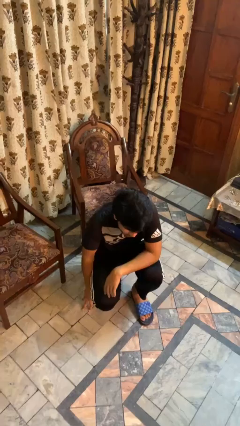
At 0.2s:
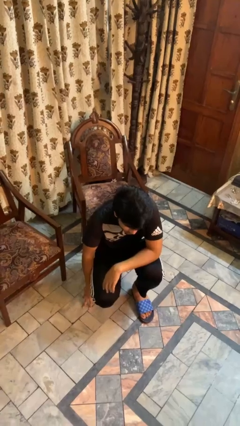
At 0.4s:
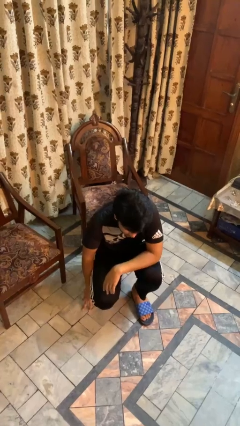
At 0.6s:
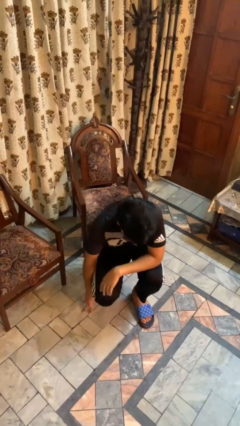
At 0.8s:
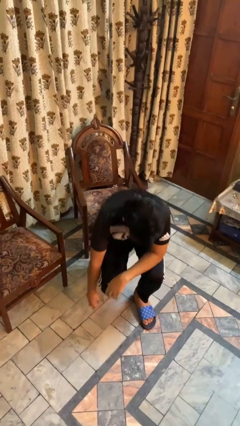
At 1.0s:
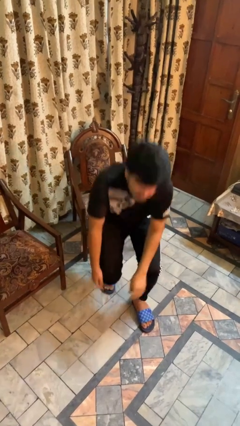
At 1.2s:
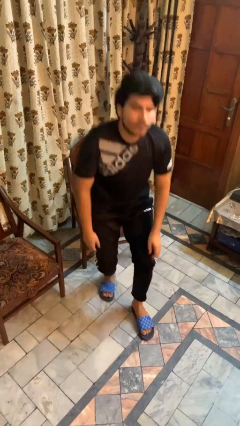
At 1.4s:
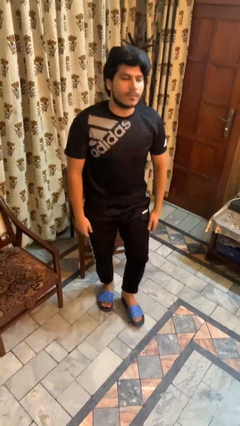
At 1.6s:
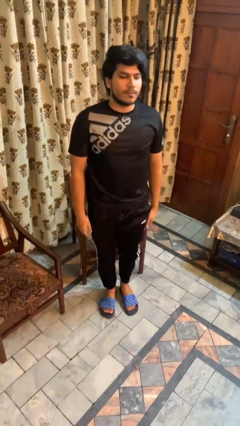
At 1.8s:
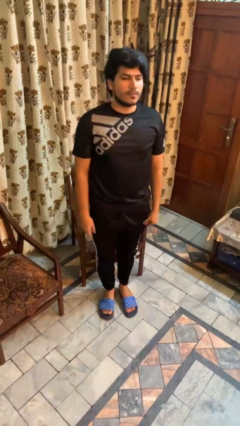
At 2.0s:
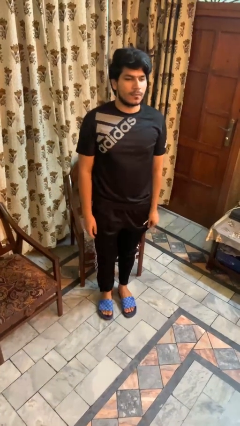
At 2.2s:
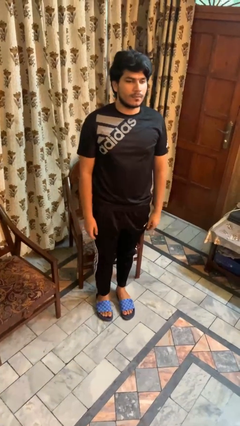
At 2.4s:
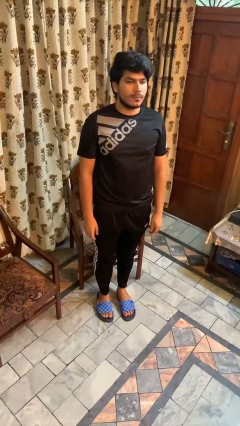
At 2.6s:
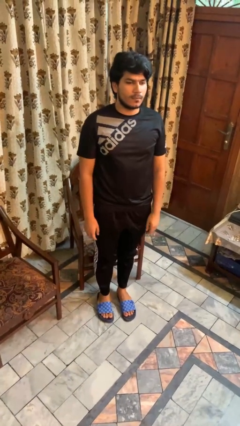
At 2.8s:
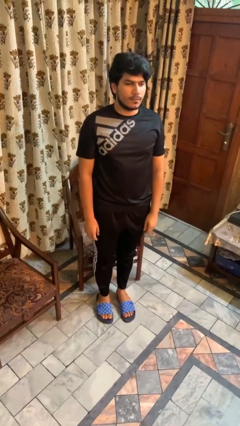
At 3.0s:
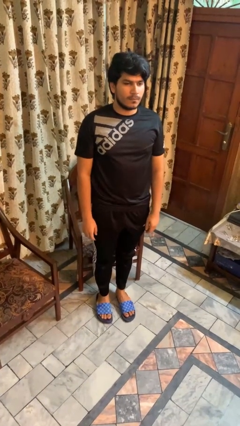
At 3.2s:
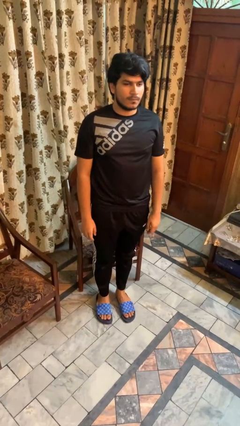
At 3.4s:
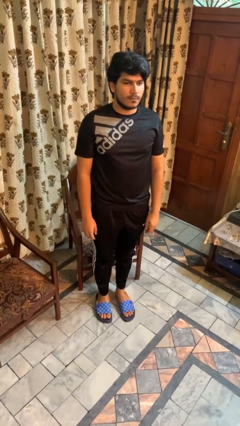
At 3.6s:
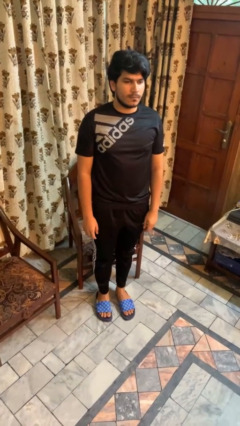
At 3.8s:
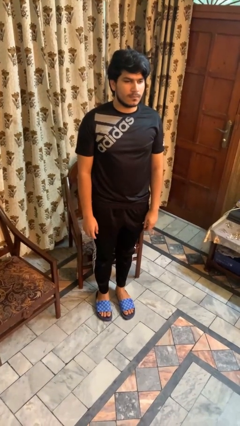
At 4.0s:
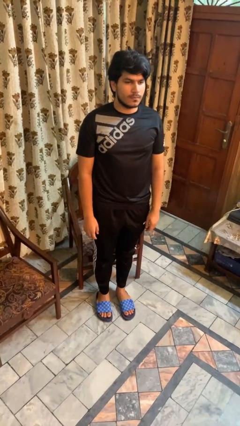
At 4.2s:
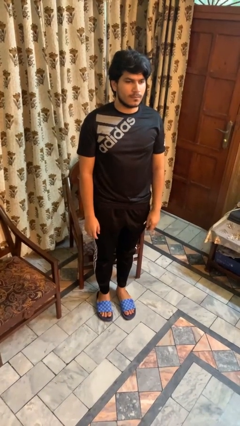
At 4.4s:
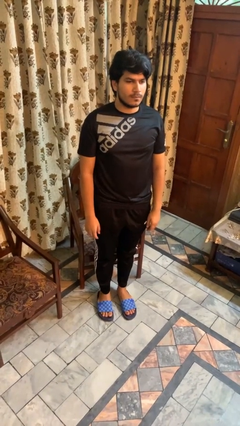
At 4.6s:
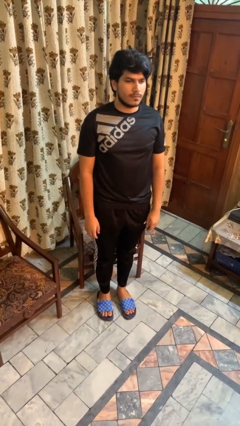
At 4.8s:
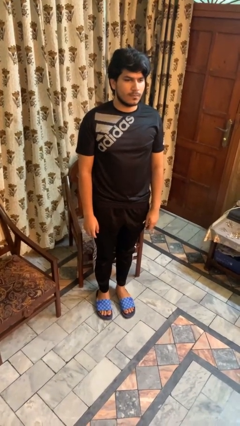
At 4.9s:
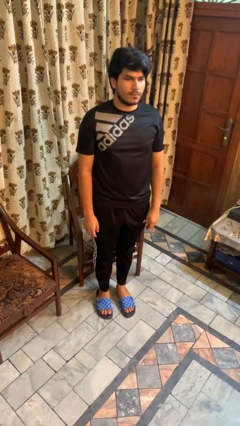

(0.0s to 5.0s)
person stands up from floor

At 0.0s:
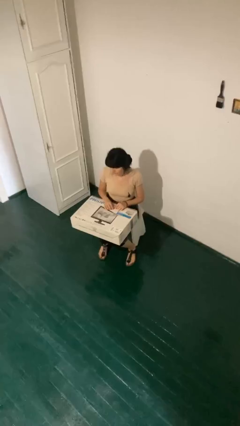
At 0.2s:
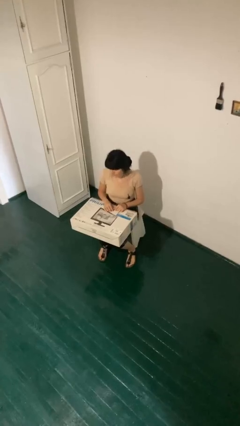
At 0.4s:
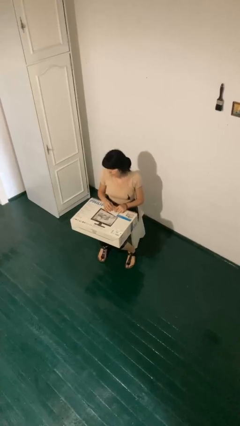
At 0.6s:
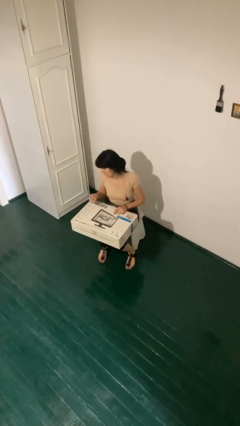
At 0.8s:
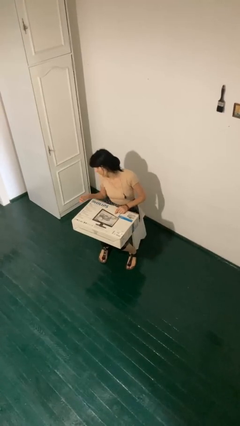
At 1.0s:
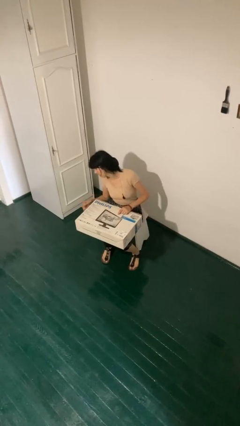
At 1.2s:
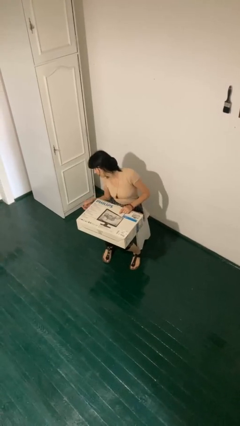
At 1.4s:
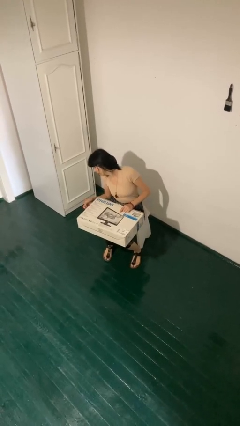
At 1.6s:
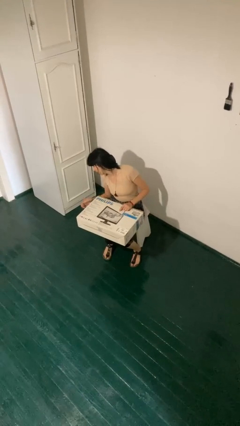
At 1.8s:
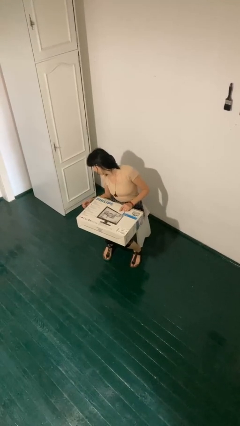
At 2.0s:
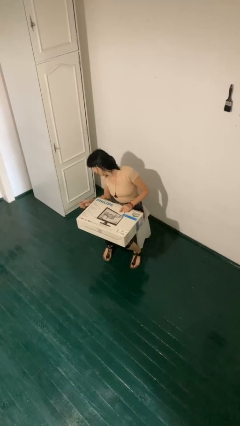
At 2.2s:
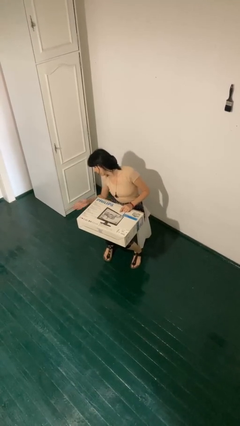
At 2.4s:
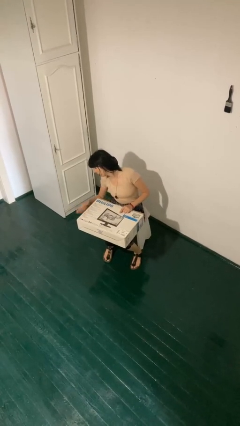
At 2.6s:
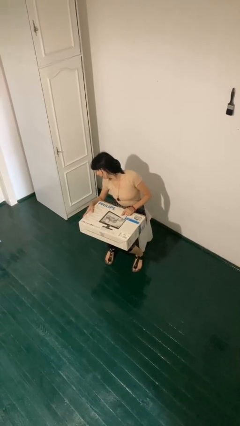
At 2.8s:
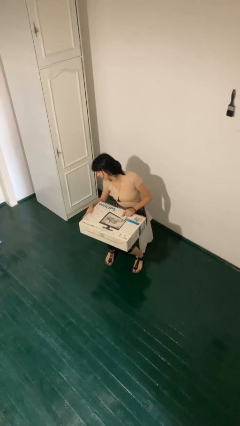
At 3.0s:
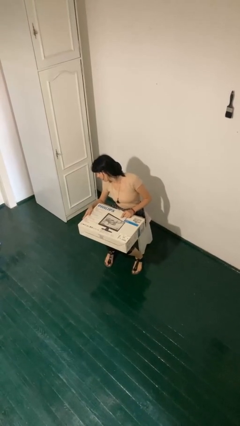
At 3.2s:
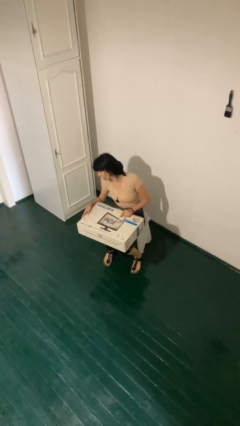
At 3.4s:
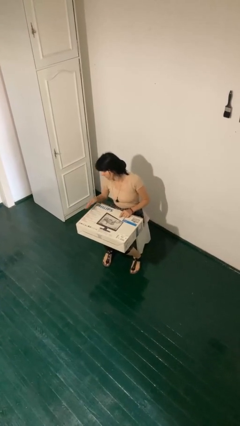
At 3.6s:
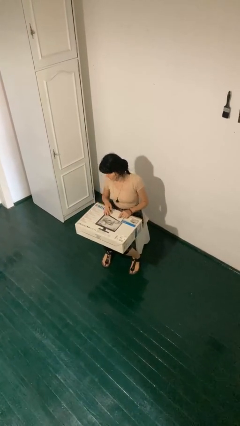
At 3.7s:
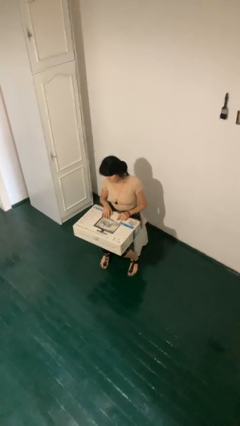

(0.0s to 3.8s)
person taps object with finger

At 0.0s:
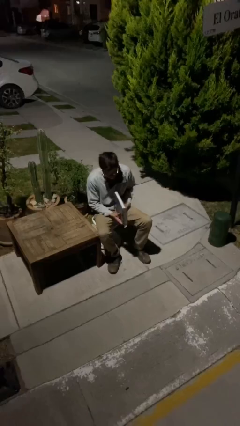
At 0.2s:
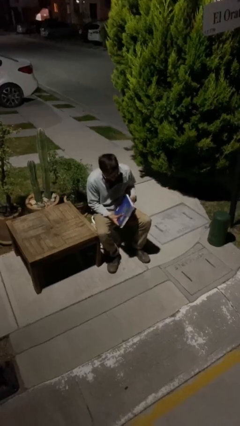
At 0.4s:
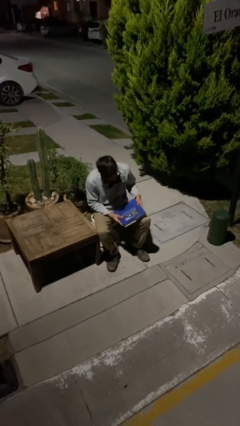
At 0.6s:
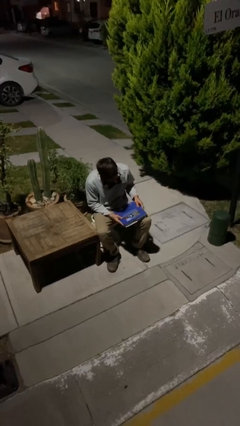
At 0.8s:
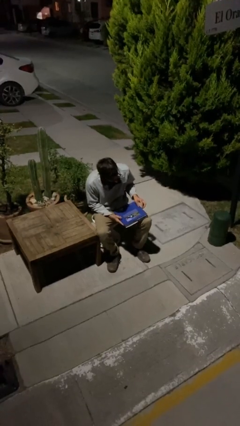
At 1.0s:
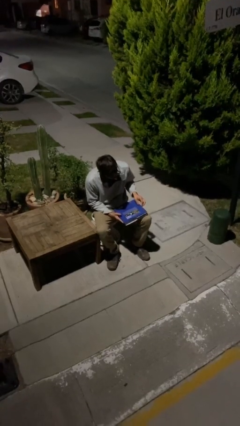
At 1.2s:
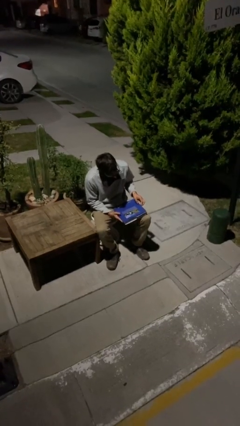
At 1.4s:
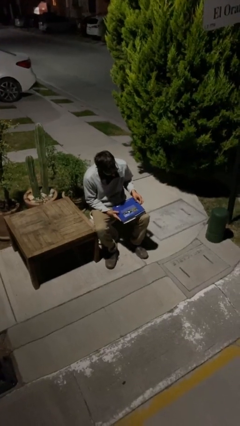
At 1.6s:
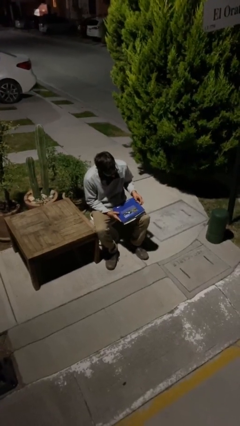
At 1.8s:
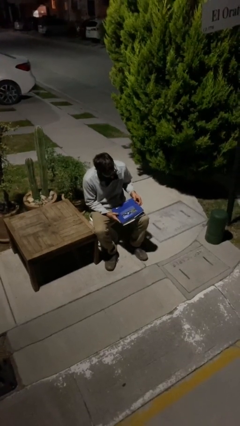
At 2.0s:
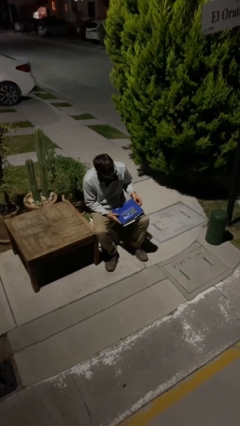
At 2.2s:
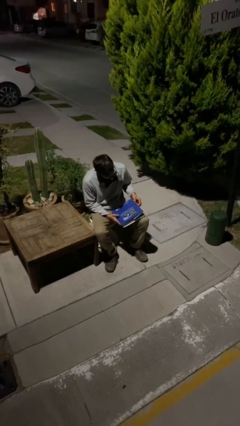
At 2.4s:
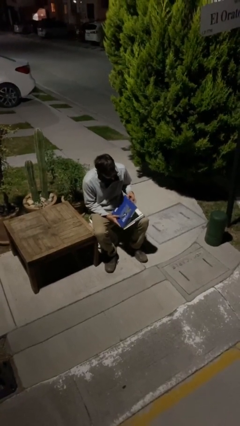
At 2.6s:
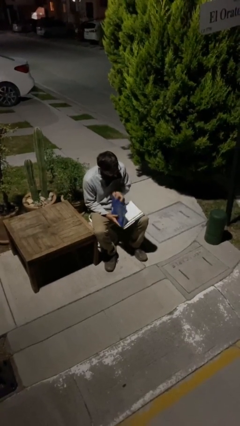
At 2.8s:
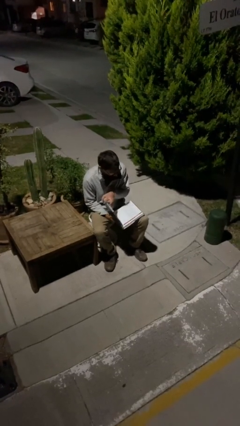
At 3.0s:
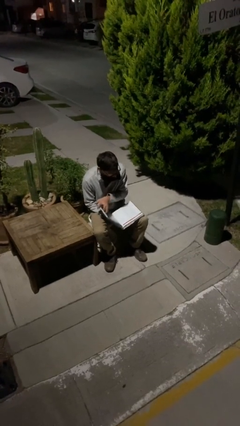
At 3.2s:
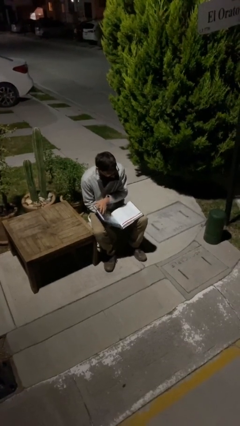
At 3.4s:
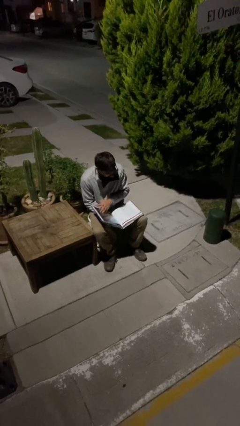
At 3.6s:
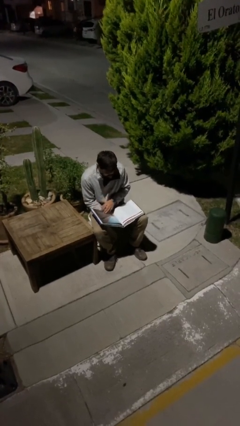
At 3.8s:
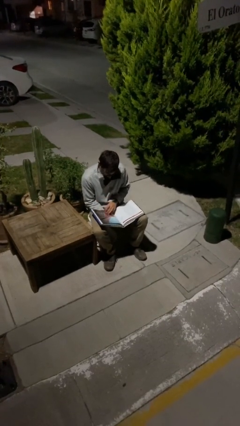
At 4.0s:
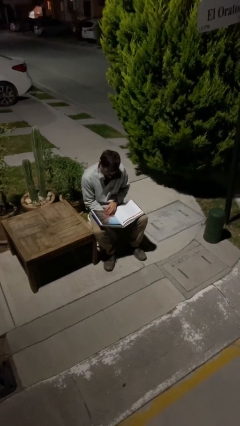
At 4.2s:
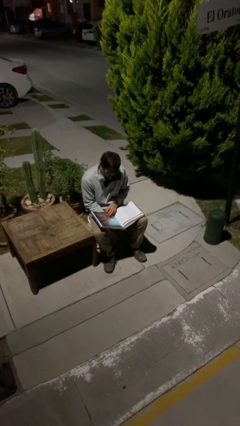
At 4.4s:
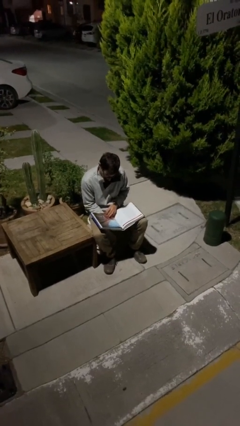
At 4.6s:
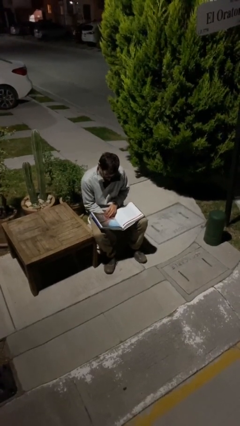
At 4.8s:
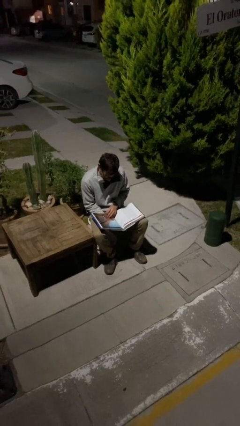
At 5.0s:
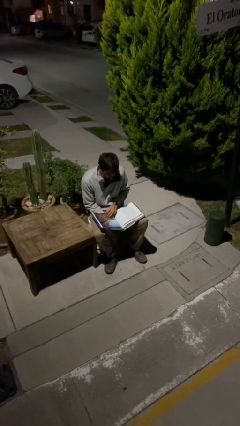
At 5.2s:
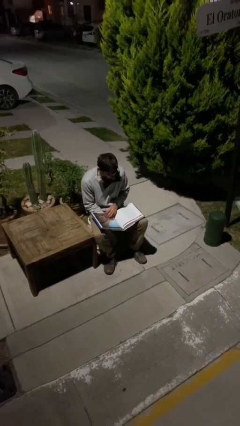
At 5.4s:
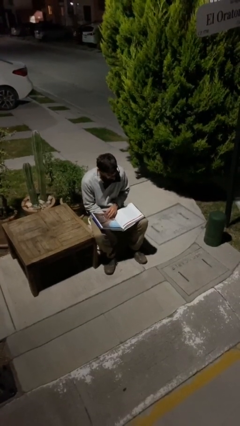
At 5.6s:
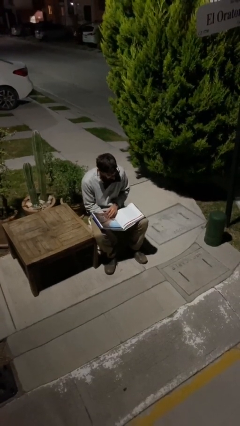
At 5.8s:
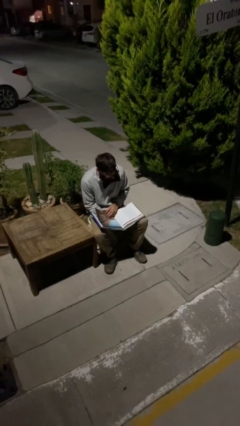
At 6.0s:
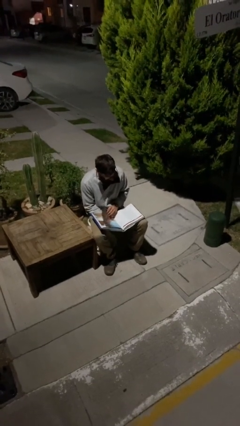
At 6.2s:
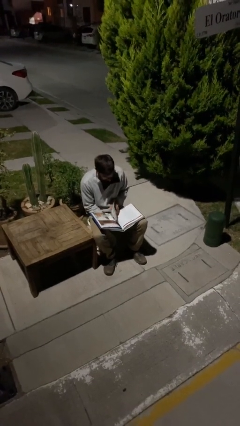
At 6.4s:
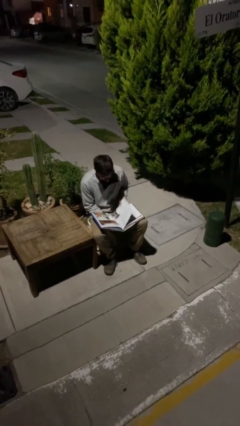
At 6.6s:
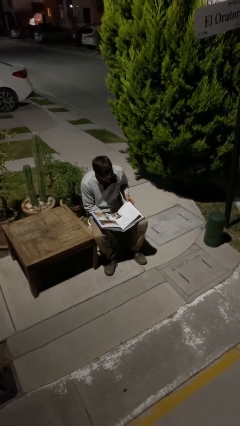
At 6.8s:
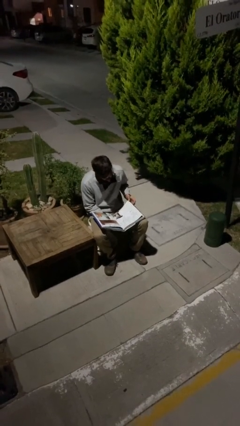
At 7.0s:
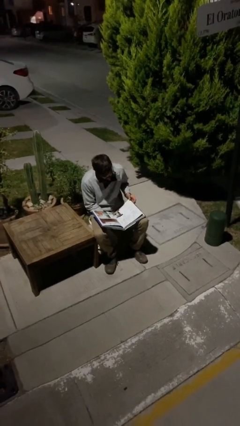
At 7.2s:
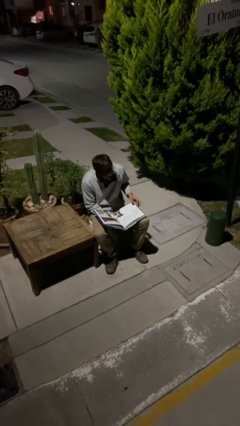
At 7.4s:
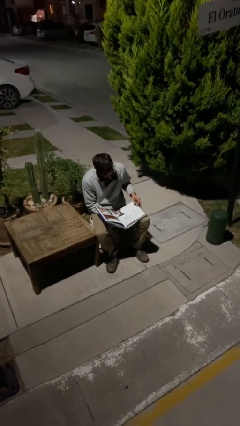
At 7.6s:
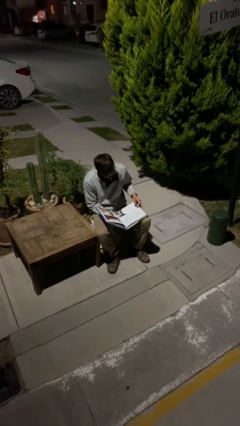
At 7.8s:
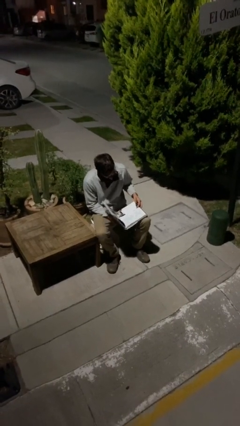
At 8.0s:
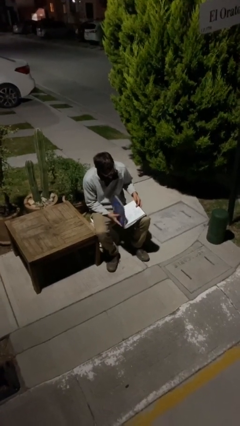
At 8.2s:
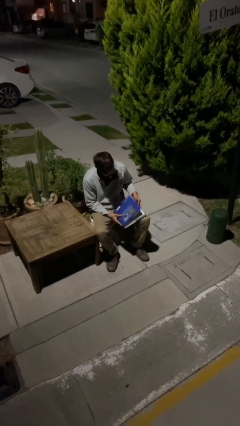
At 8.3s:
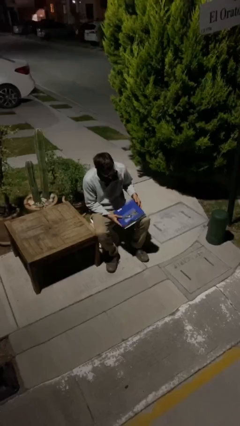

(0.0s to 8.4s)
person reads document

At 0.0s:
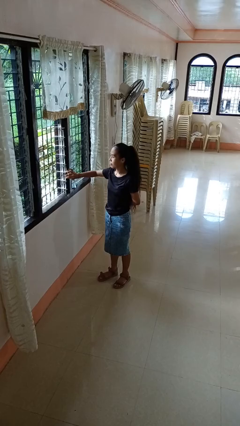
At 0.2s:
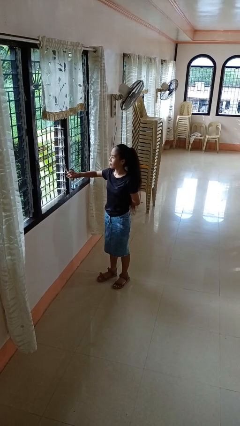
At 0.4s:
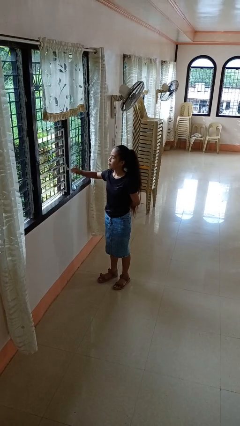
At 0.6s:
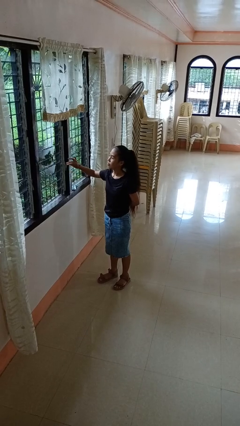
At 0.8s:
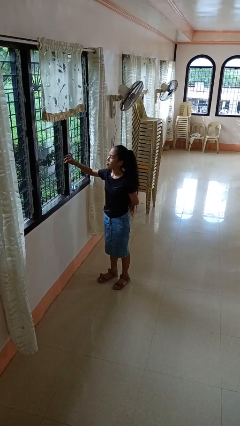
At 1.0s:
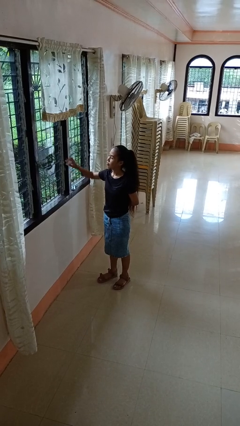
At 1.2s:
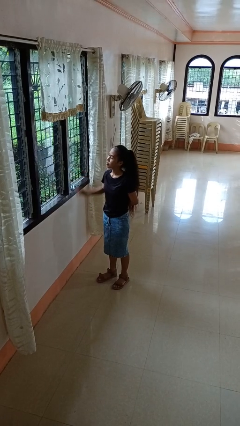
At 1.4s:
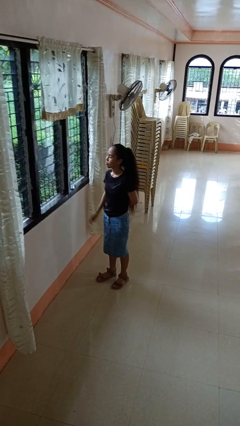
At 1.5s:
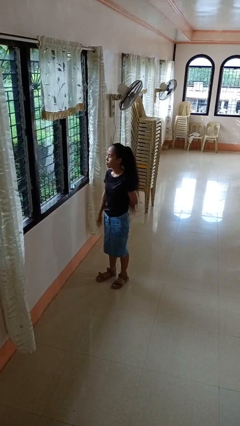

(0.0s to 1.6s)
person closes home window
